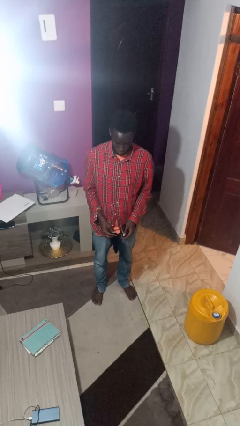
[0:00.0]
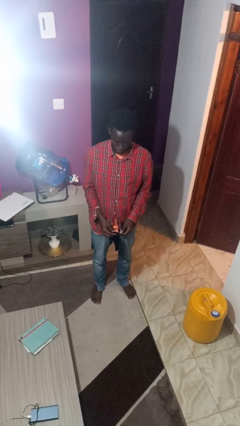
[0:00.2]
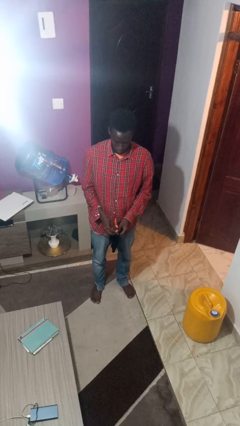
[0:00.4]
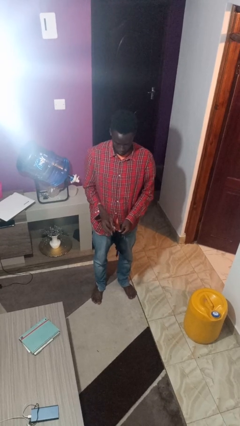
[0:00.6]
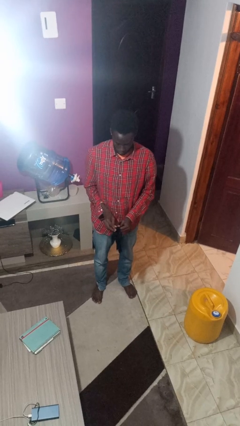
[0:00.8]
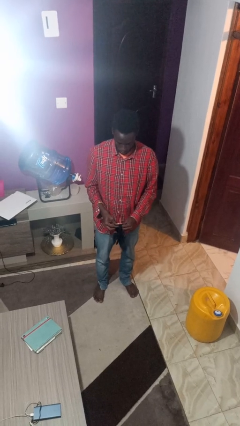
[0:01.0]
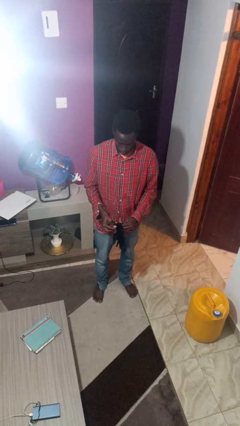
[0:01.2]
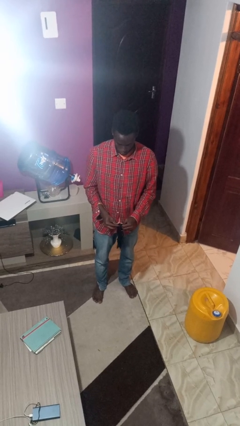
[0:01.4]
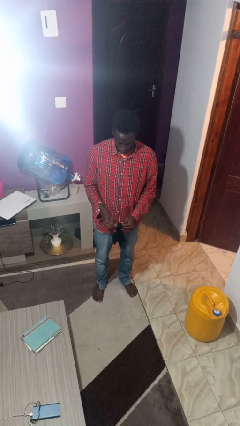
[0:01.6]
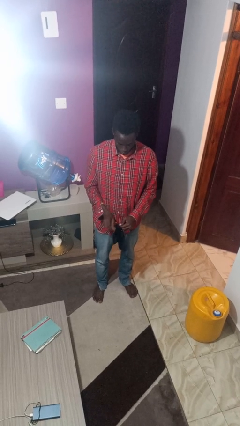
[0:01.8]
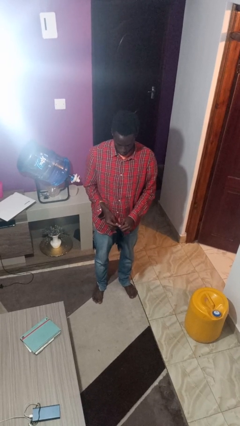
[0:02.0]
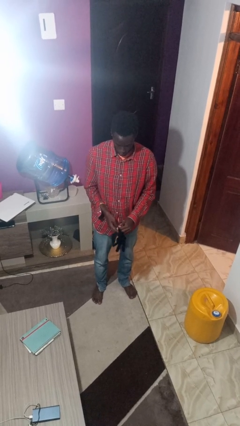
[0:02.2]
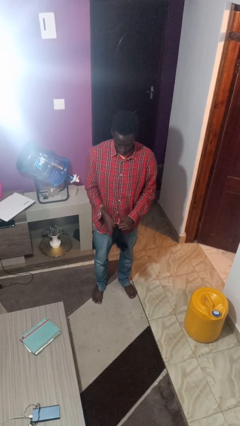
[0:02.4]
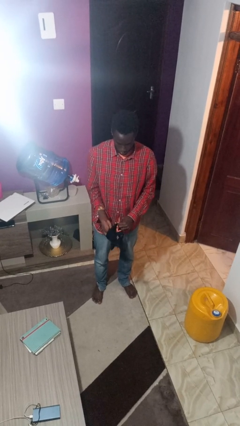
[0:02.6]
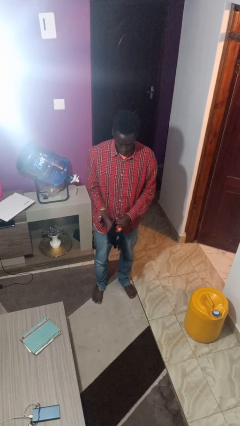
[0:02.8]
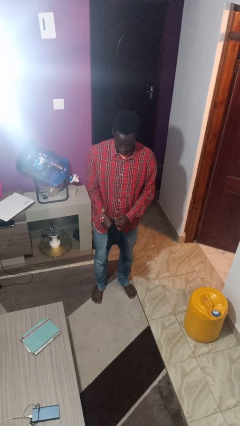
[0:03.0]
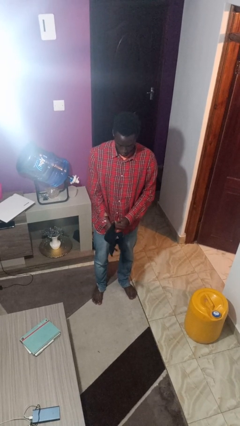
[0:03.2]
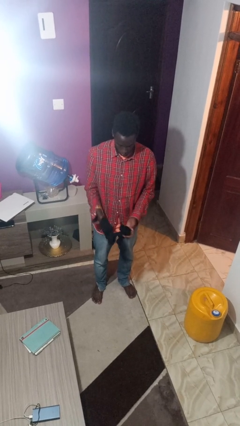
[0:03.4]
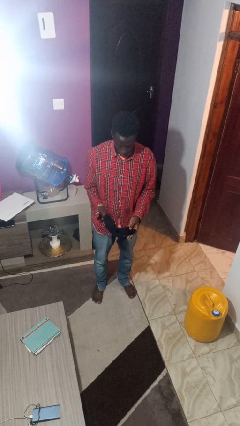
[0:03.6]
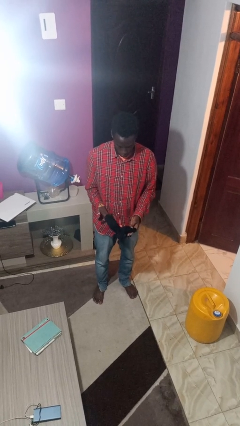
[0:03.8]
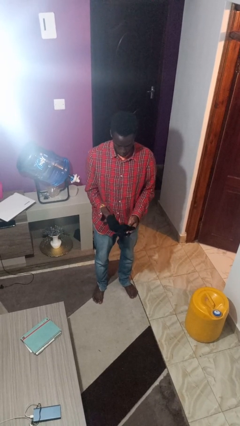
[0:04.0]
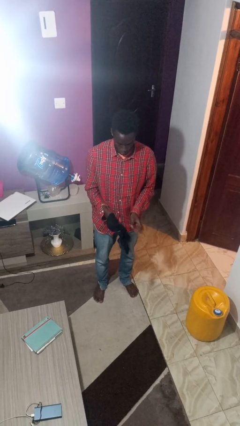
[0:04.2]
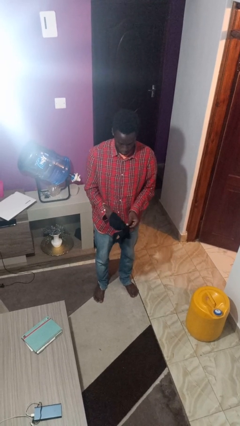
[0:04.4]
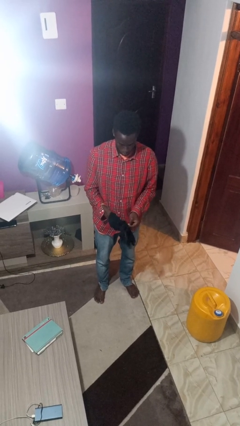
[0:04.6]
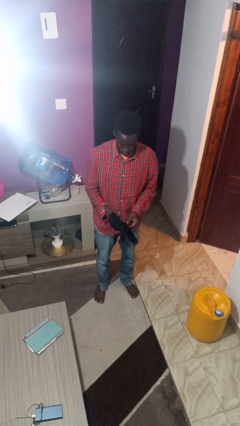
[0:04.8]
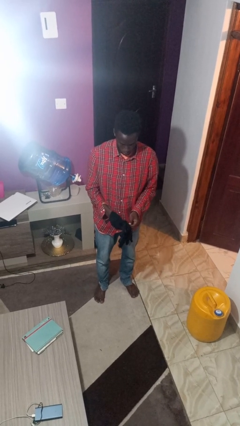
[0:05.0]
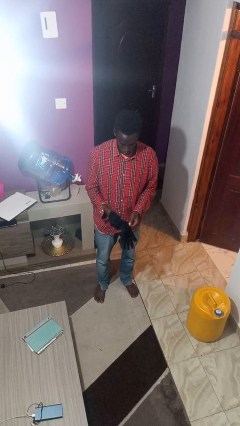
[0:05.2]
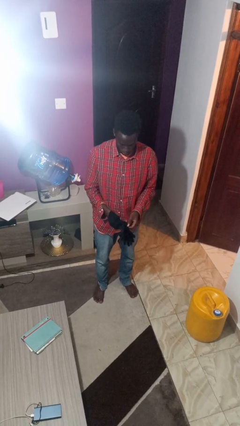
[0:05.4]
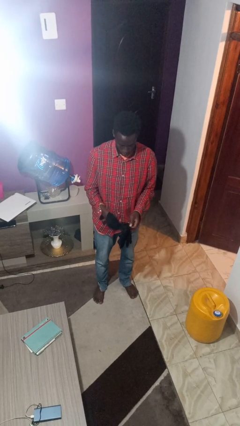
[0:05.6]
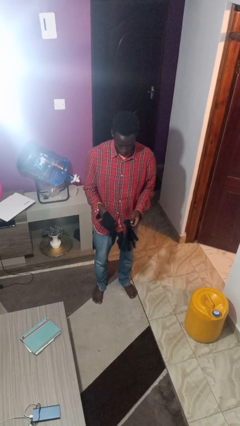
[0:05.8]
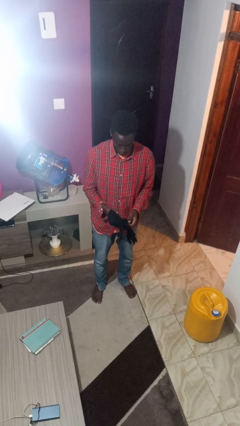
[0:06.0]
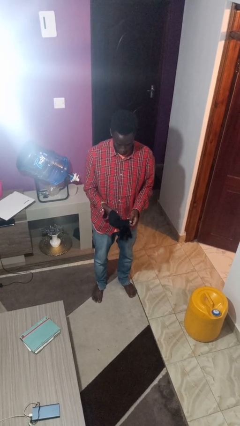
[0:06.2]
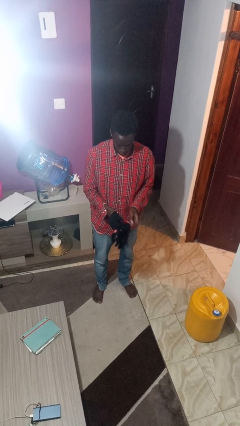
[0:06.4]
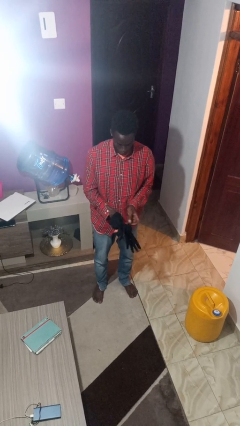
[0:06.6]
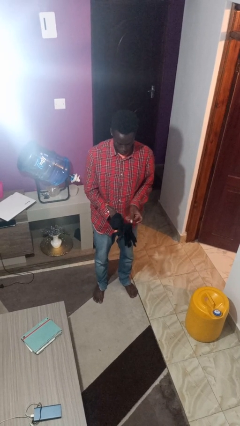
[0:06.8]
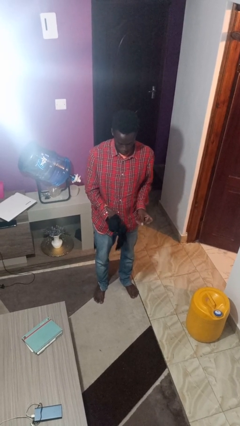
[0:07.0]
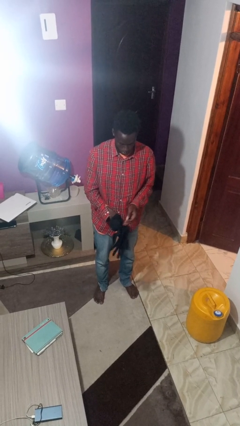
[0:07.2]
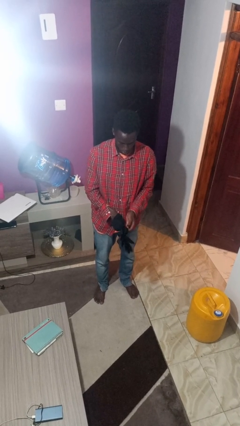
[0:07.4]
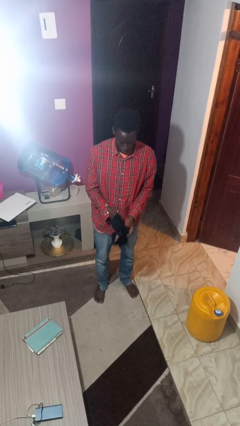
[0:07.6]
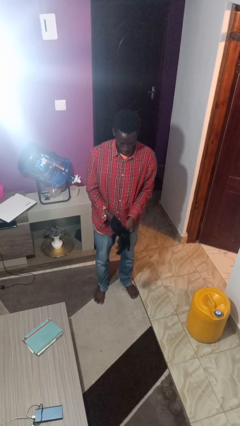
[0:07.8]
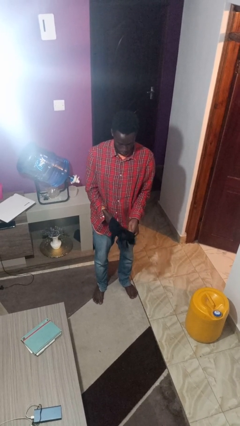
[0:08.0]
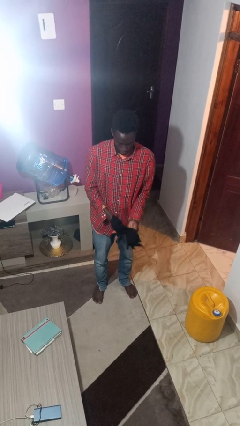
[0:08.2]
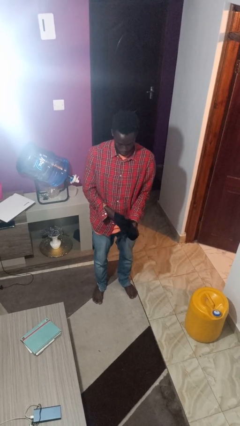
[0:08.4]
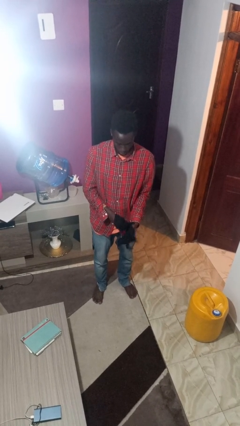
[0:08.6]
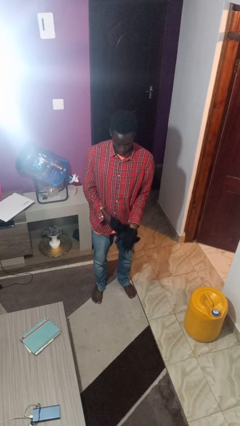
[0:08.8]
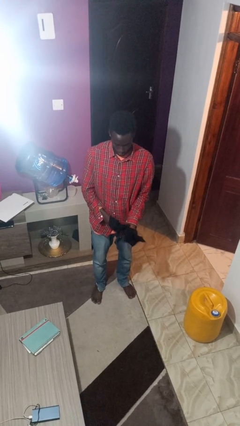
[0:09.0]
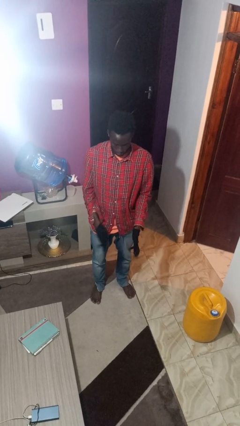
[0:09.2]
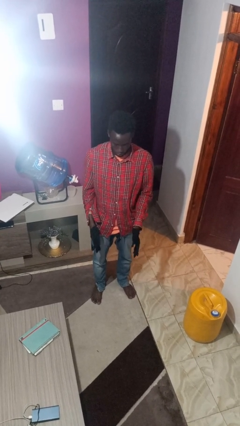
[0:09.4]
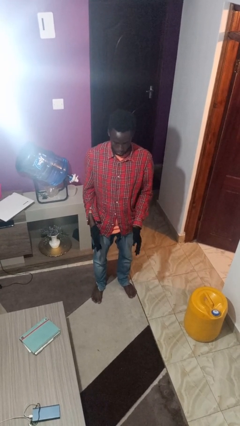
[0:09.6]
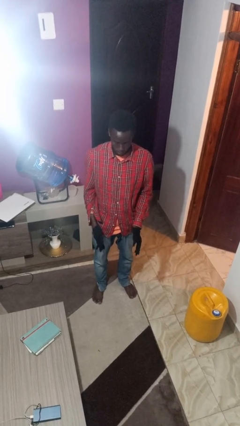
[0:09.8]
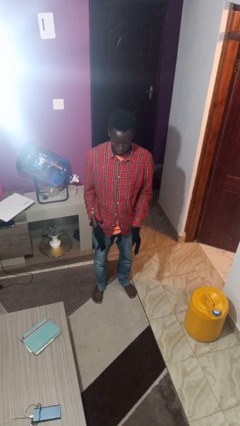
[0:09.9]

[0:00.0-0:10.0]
person puts on gloves

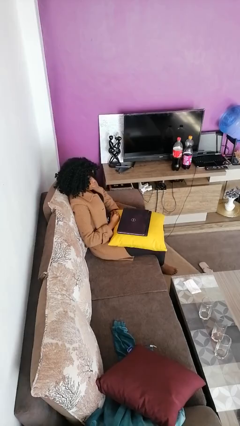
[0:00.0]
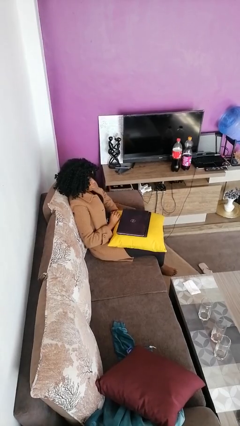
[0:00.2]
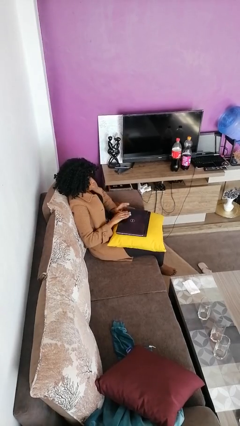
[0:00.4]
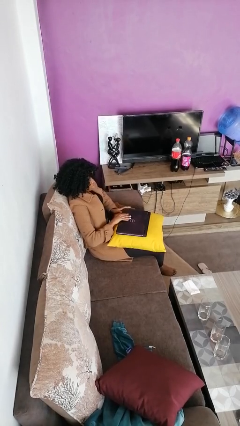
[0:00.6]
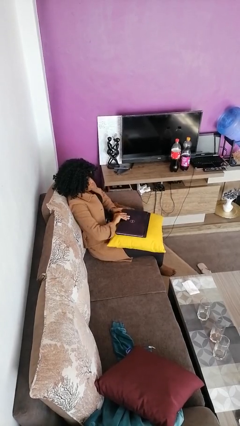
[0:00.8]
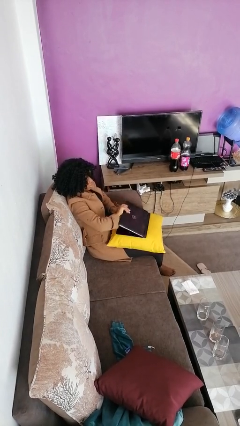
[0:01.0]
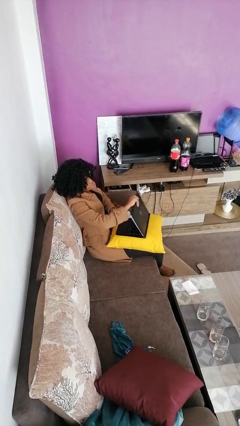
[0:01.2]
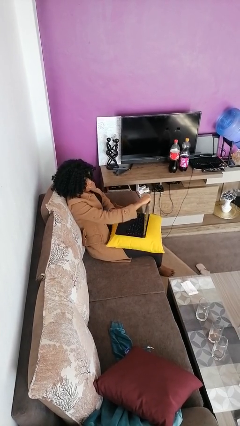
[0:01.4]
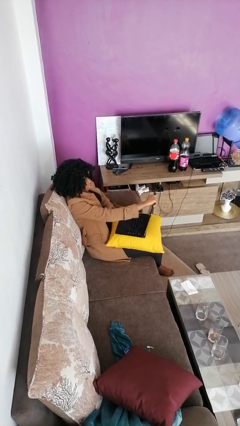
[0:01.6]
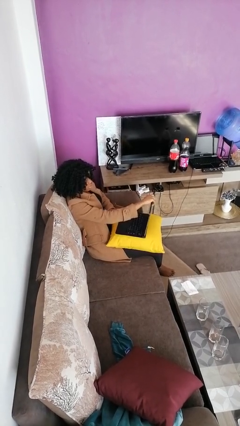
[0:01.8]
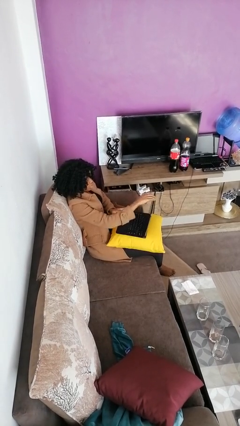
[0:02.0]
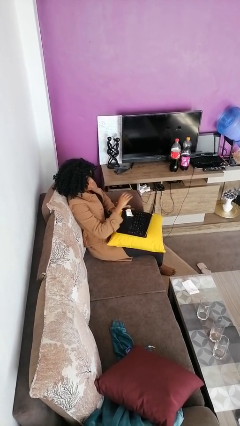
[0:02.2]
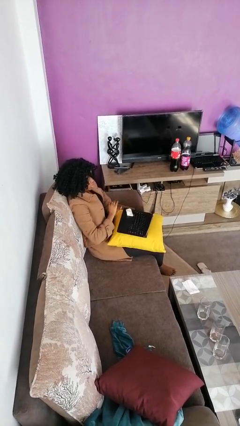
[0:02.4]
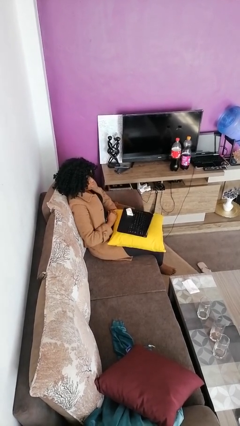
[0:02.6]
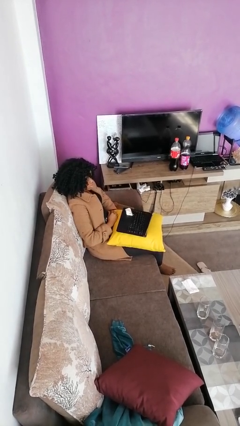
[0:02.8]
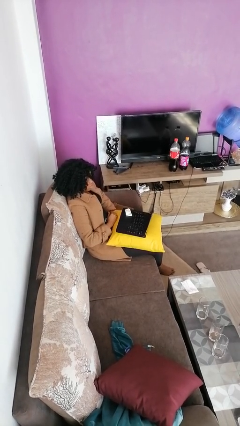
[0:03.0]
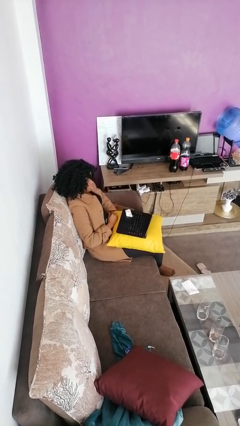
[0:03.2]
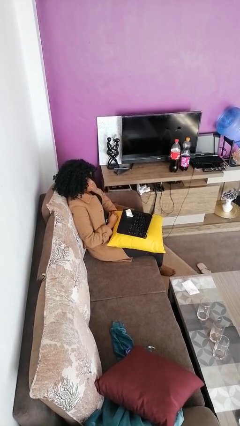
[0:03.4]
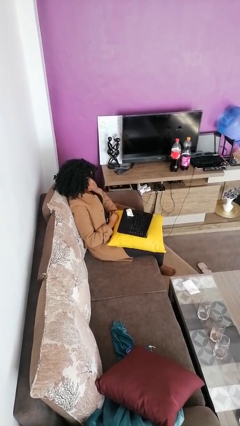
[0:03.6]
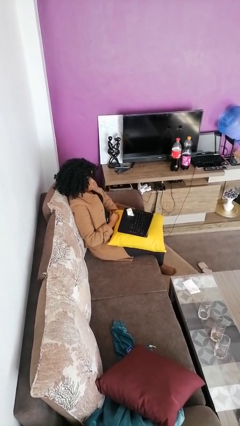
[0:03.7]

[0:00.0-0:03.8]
person opens laptop

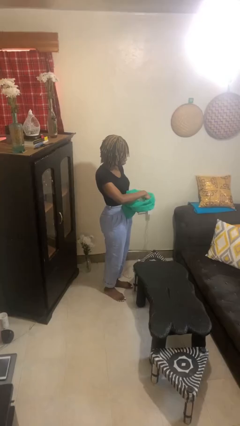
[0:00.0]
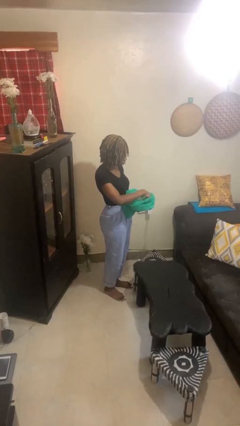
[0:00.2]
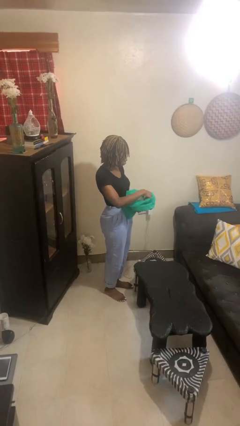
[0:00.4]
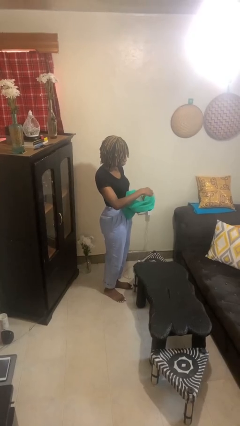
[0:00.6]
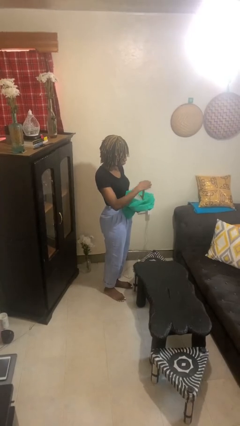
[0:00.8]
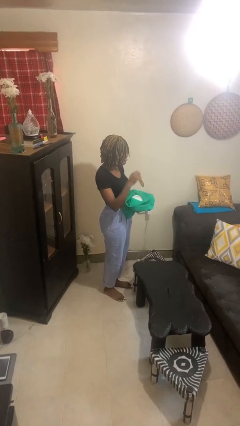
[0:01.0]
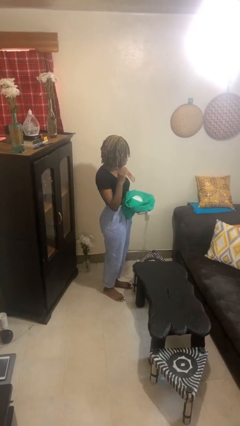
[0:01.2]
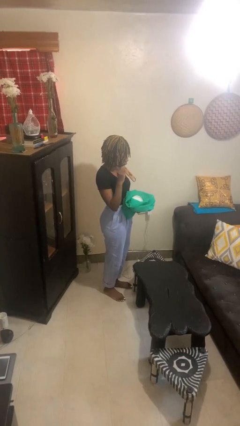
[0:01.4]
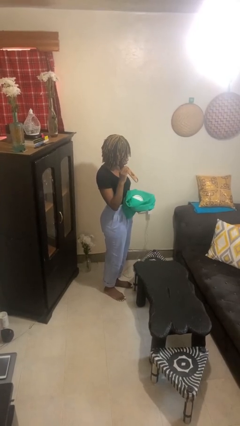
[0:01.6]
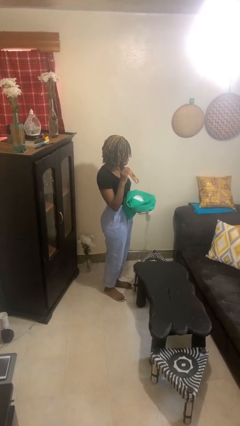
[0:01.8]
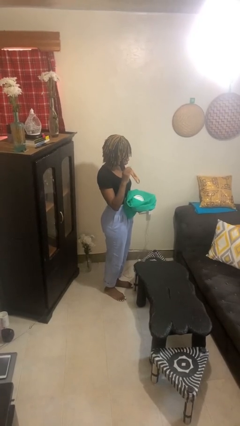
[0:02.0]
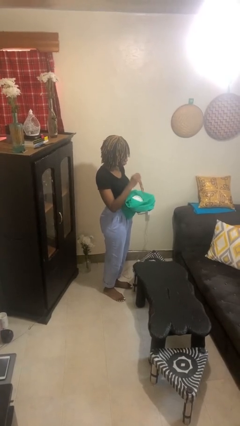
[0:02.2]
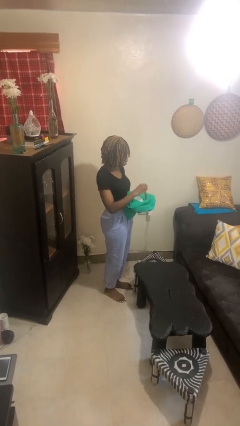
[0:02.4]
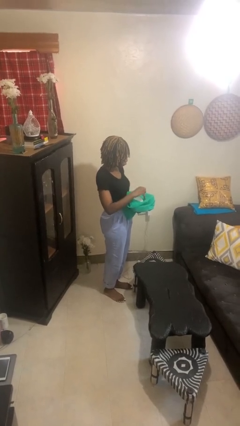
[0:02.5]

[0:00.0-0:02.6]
person takes object from bag

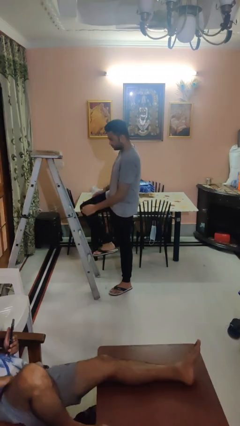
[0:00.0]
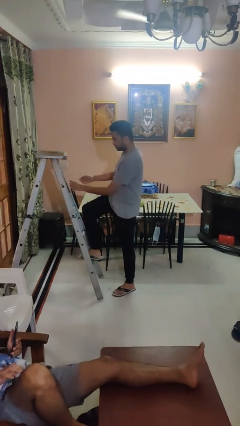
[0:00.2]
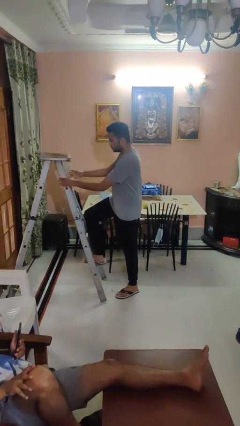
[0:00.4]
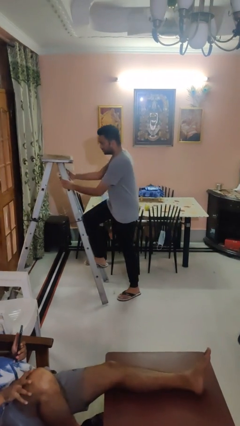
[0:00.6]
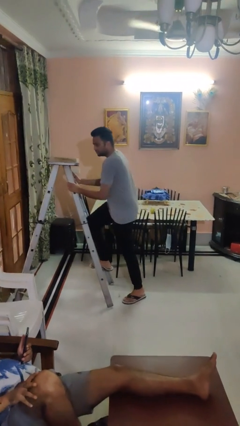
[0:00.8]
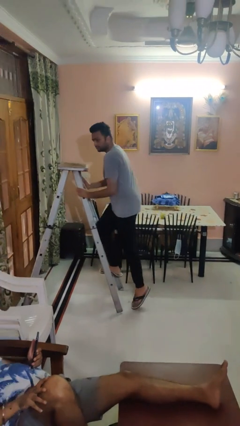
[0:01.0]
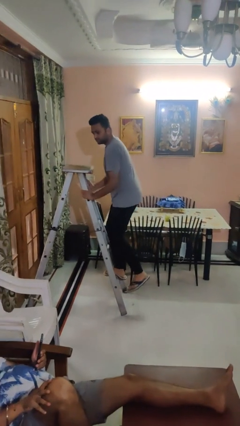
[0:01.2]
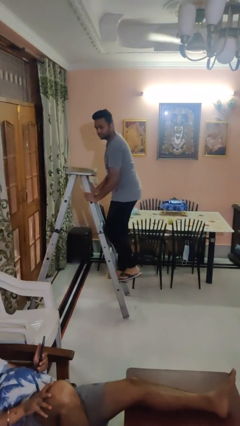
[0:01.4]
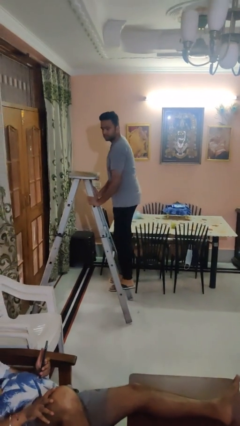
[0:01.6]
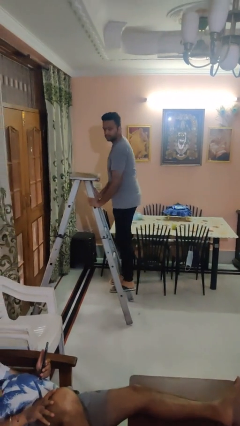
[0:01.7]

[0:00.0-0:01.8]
person climbs up ladder
